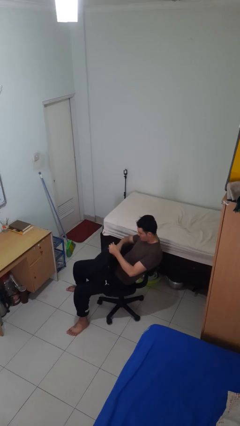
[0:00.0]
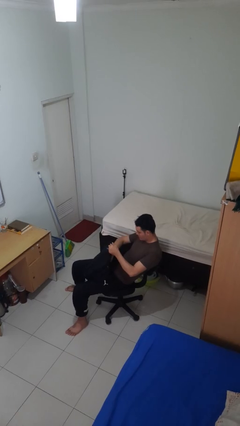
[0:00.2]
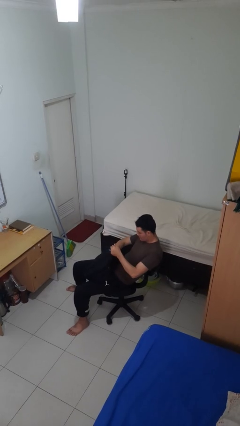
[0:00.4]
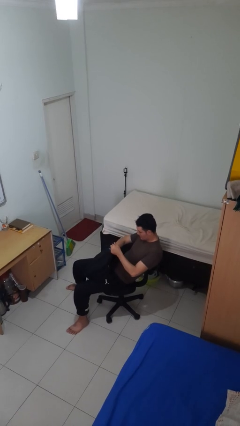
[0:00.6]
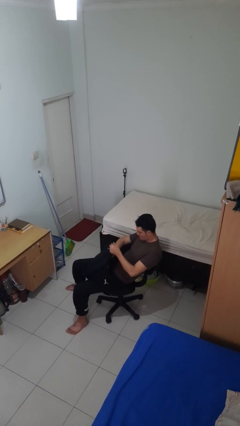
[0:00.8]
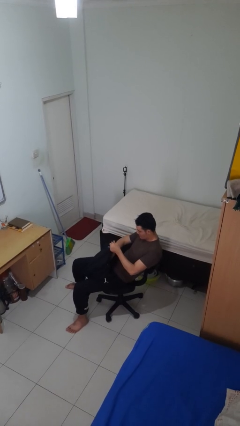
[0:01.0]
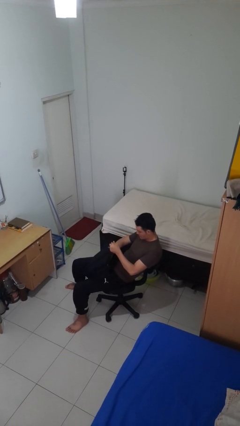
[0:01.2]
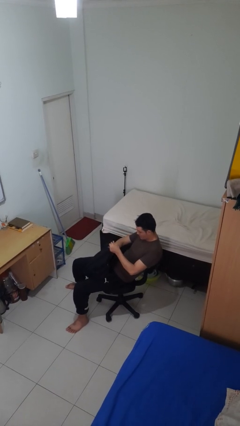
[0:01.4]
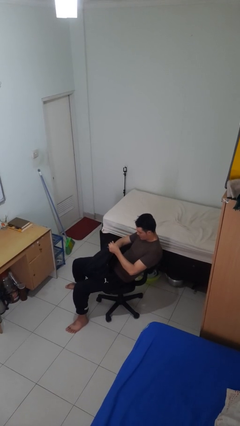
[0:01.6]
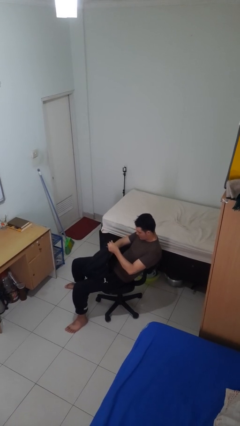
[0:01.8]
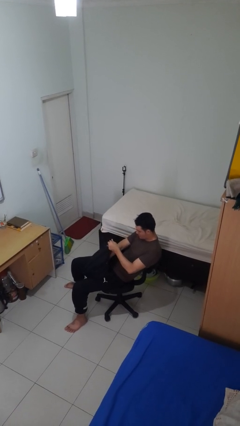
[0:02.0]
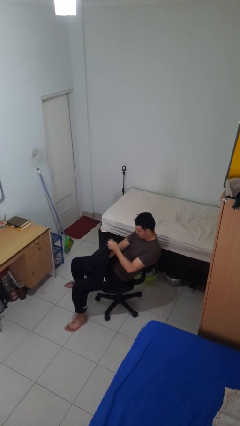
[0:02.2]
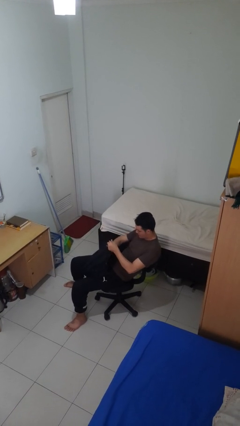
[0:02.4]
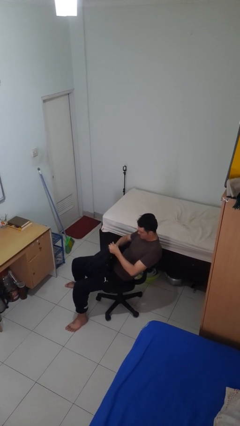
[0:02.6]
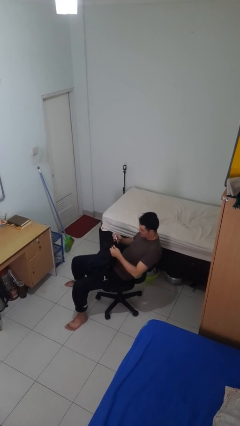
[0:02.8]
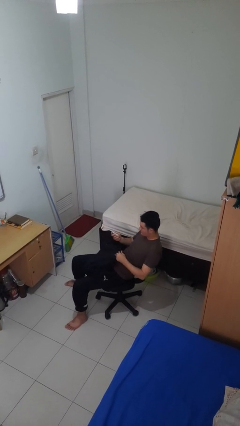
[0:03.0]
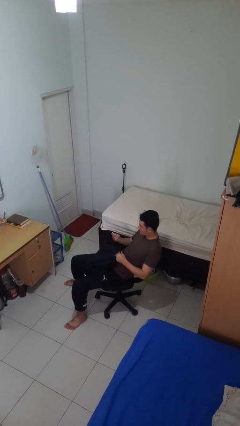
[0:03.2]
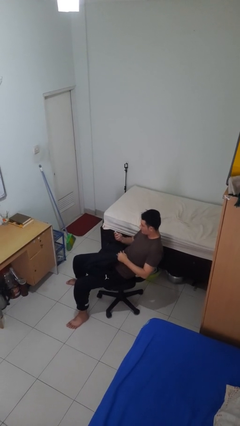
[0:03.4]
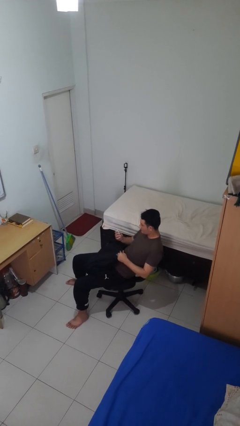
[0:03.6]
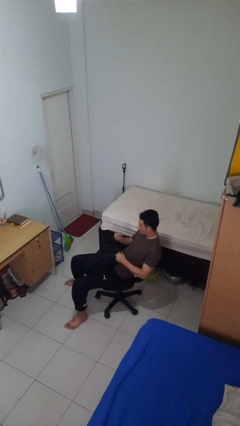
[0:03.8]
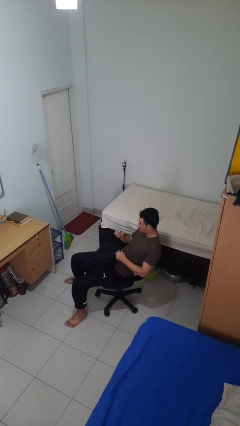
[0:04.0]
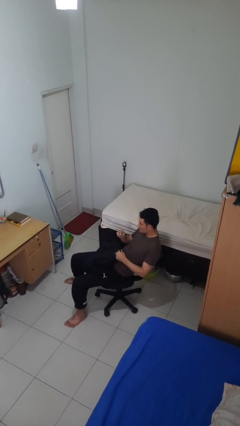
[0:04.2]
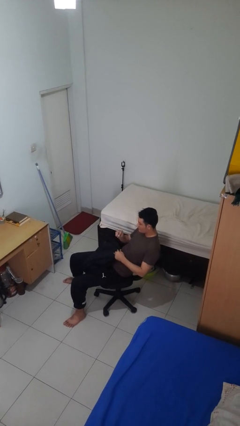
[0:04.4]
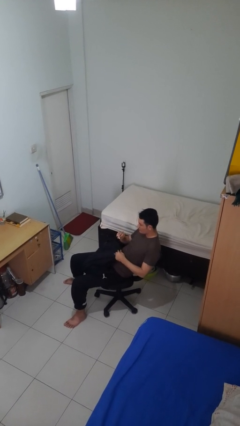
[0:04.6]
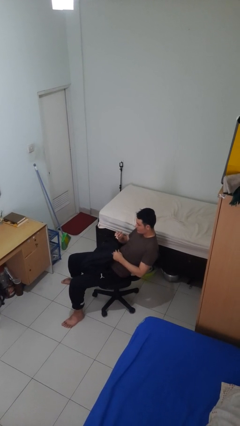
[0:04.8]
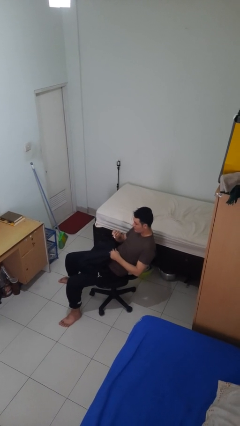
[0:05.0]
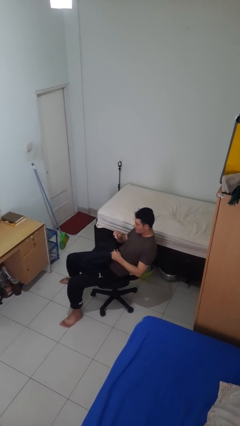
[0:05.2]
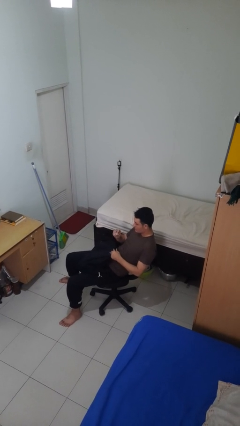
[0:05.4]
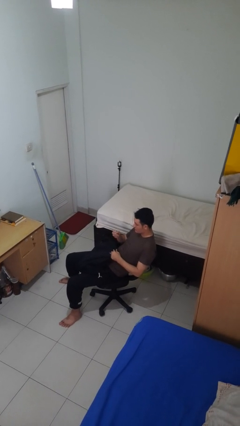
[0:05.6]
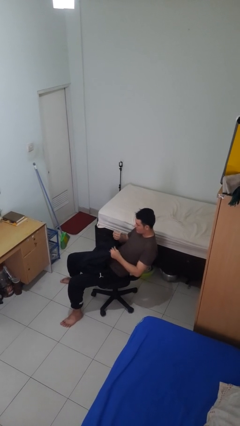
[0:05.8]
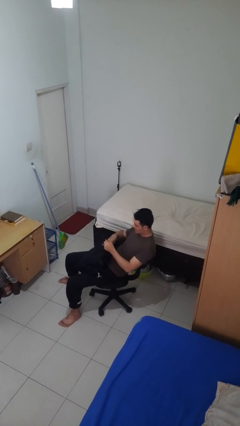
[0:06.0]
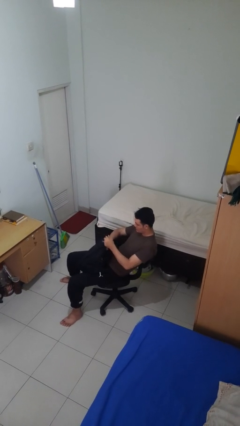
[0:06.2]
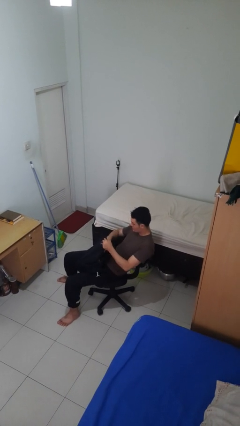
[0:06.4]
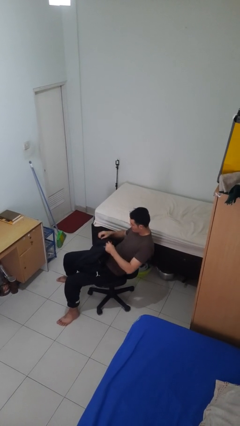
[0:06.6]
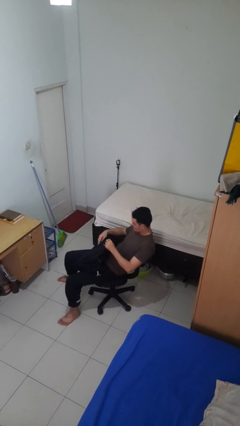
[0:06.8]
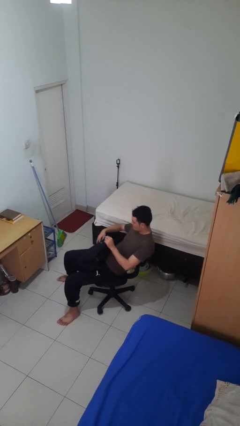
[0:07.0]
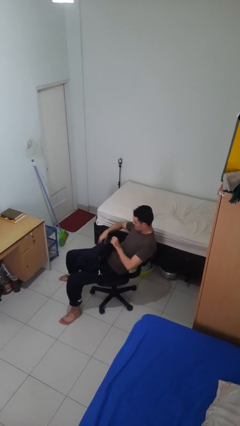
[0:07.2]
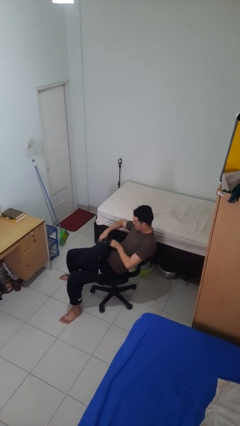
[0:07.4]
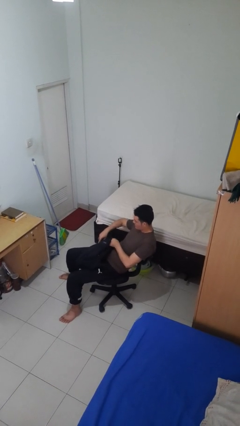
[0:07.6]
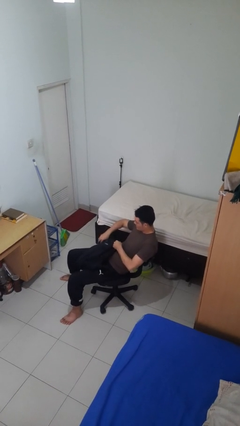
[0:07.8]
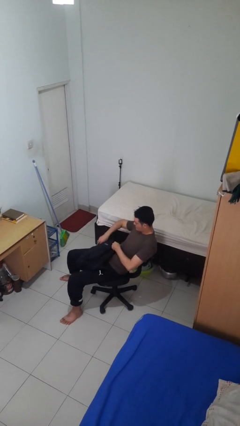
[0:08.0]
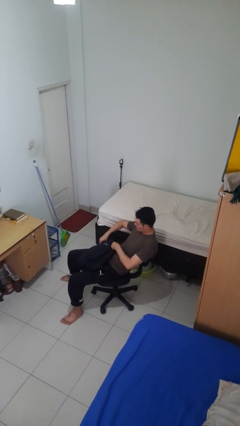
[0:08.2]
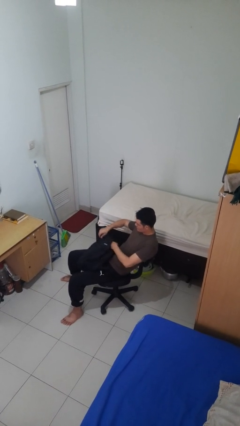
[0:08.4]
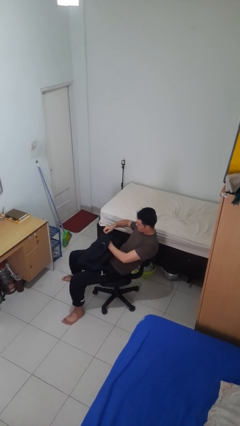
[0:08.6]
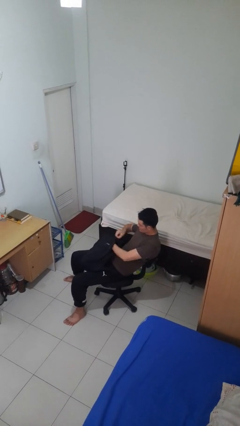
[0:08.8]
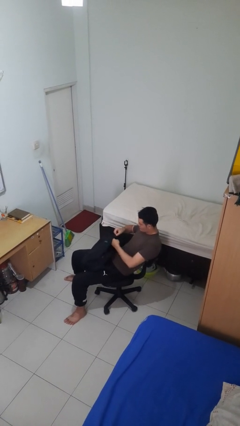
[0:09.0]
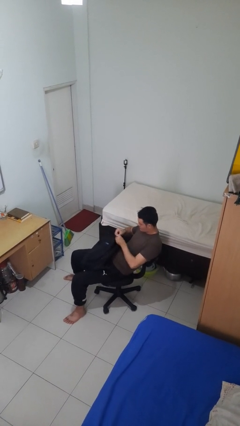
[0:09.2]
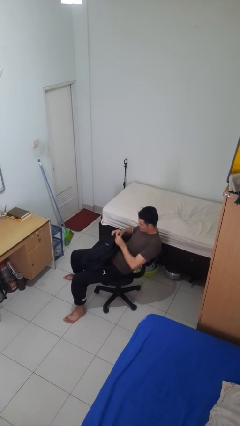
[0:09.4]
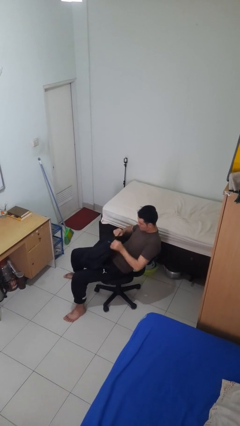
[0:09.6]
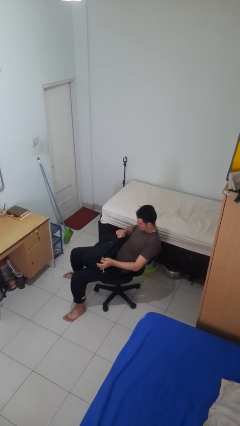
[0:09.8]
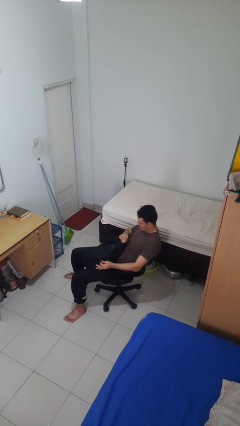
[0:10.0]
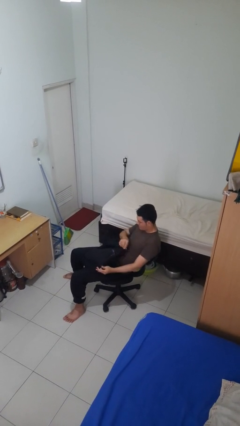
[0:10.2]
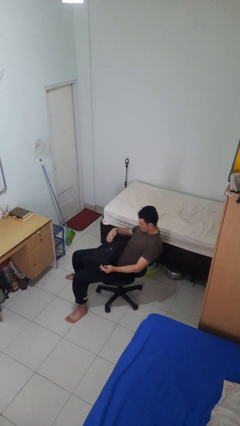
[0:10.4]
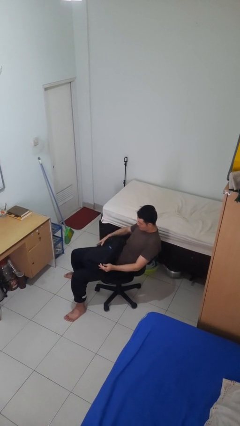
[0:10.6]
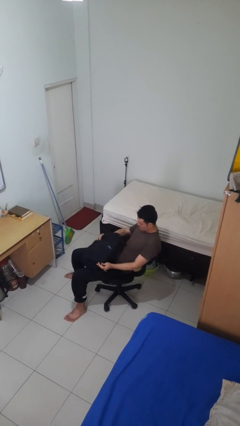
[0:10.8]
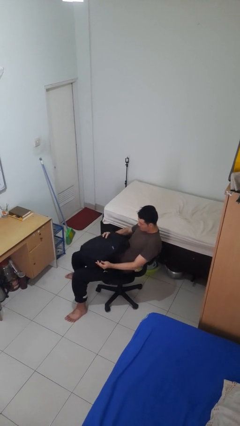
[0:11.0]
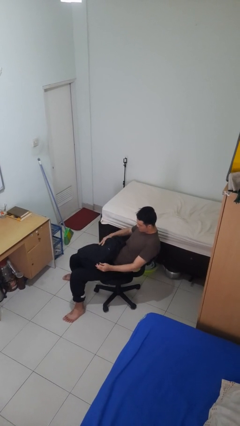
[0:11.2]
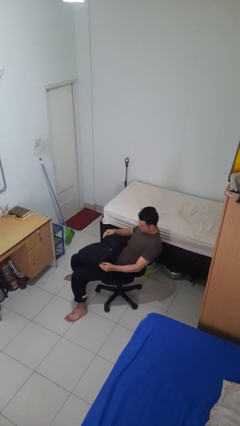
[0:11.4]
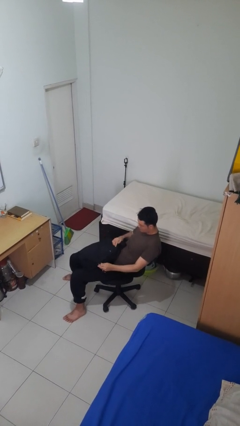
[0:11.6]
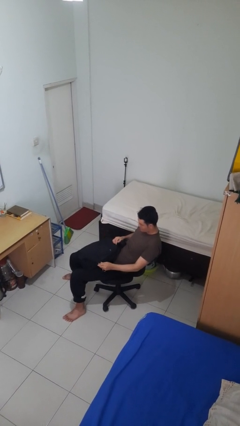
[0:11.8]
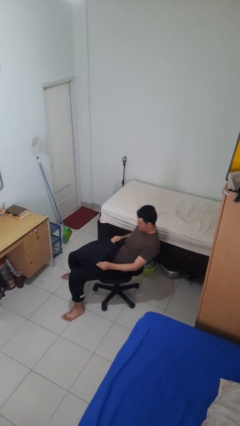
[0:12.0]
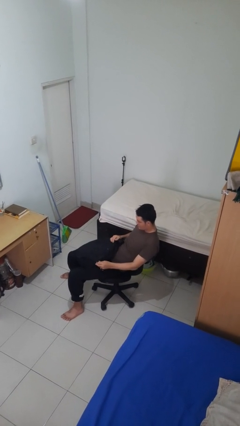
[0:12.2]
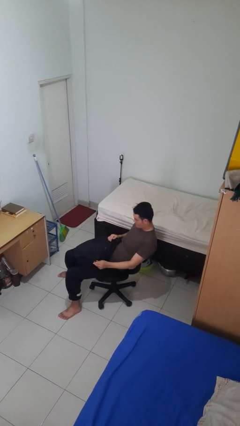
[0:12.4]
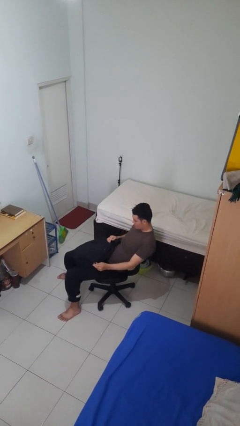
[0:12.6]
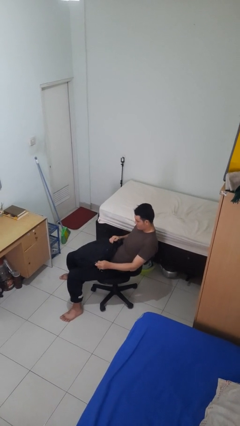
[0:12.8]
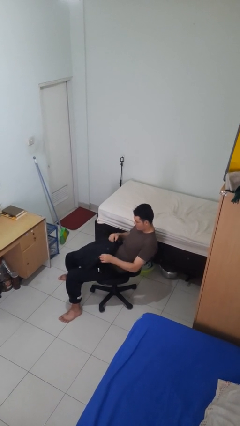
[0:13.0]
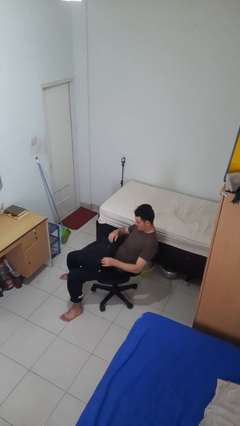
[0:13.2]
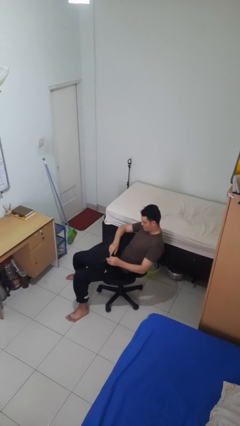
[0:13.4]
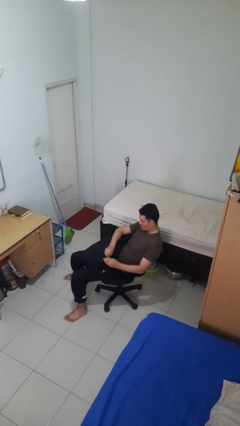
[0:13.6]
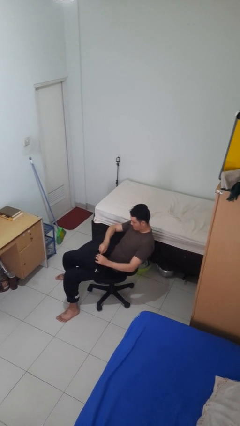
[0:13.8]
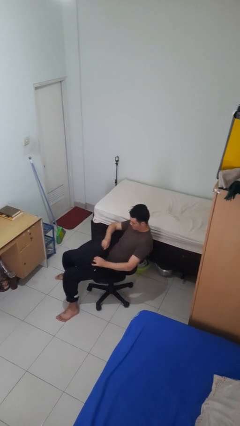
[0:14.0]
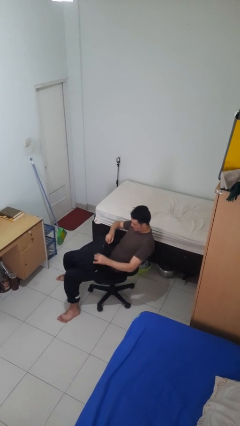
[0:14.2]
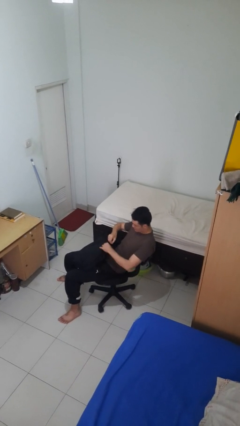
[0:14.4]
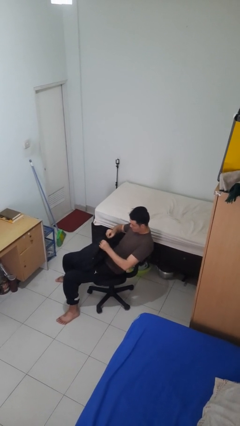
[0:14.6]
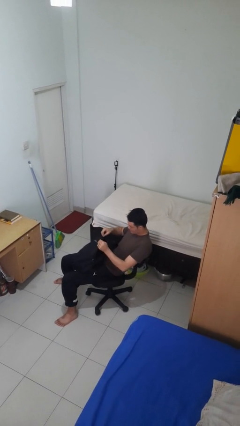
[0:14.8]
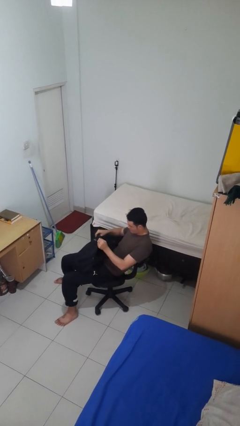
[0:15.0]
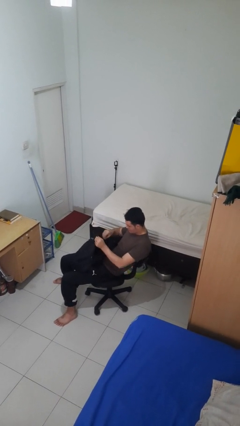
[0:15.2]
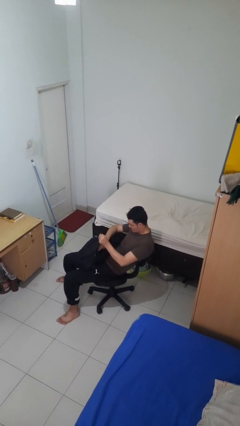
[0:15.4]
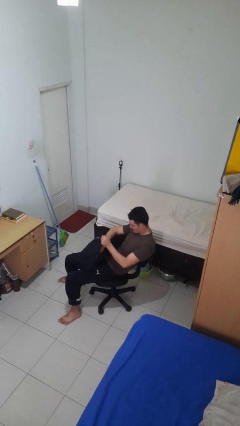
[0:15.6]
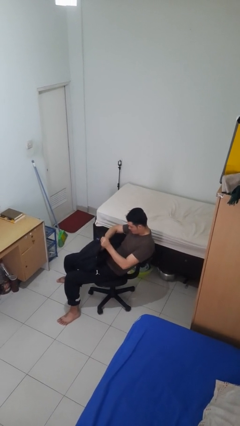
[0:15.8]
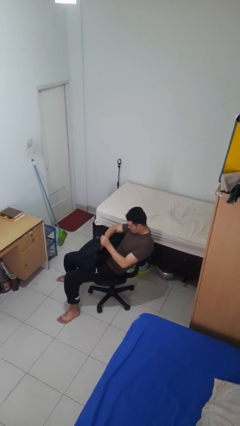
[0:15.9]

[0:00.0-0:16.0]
person searches in backpack

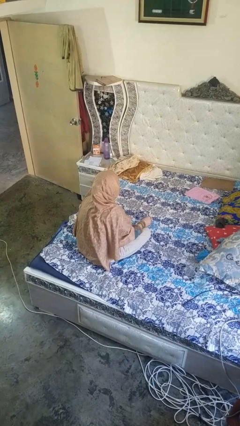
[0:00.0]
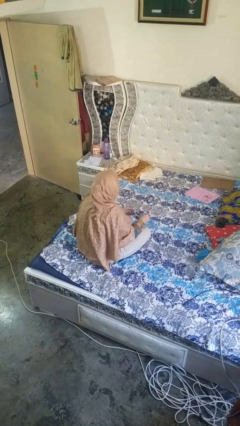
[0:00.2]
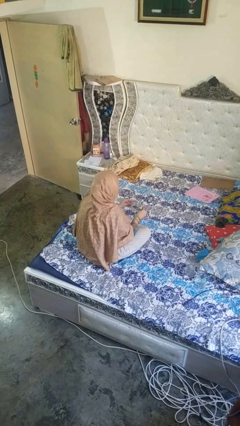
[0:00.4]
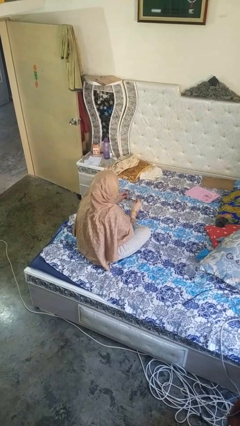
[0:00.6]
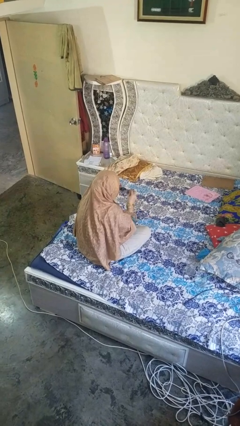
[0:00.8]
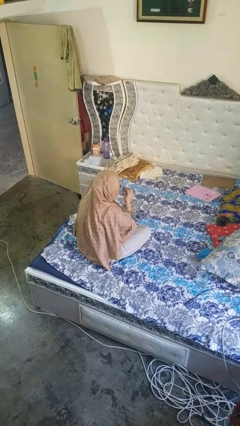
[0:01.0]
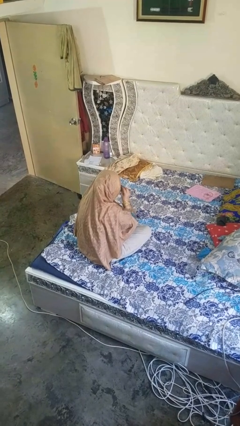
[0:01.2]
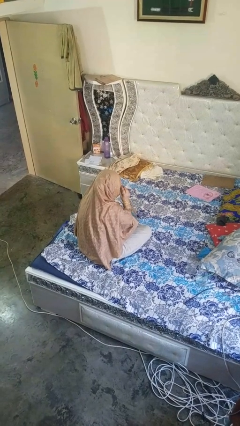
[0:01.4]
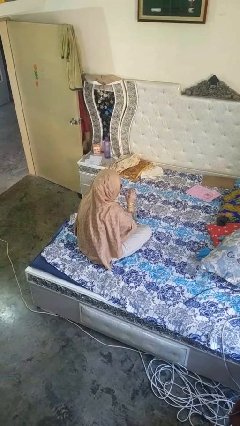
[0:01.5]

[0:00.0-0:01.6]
person puts on glasses

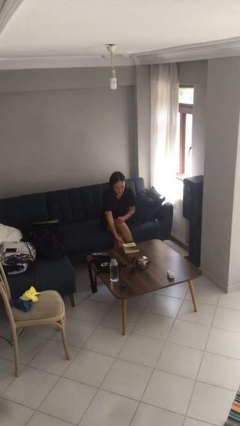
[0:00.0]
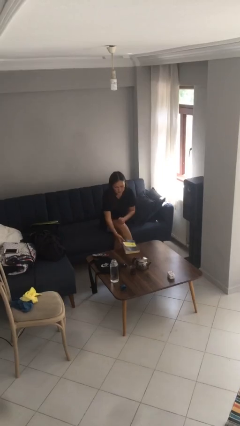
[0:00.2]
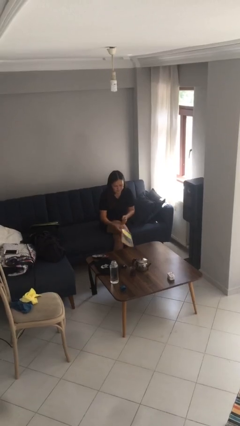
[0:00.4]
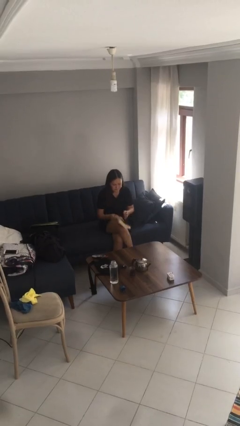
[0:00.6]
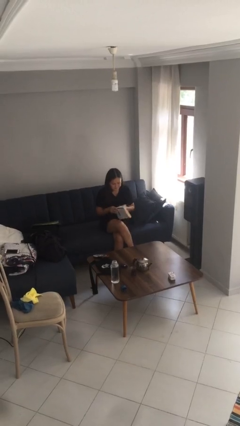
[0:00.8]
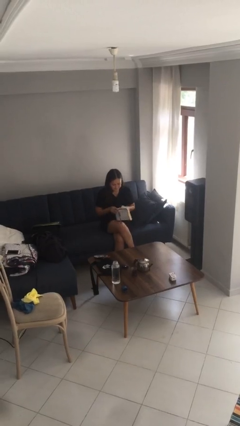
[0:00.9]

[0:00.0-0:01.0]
person picks up object from table
